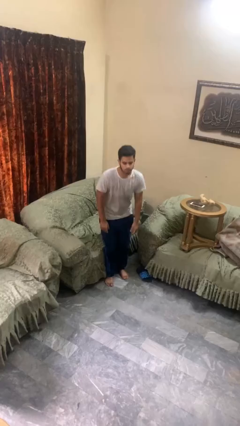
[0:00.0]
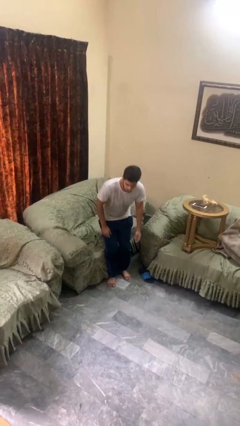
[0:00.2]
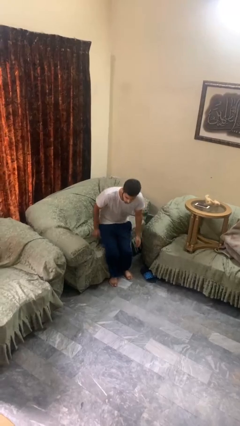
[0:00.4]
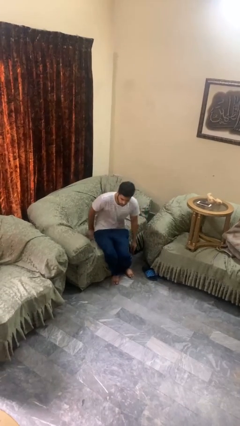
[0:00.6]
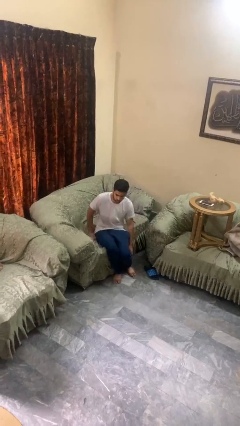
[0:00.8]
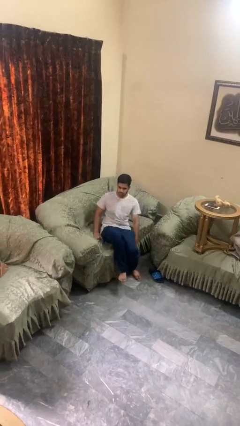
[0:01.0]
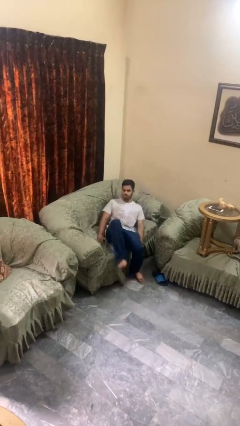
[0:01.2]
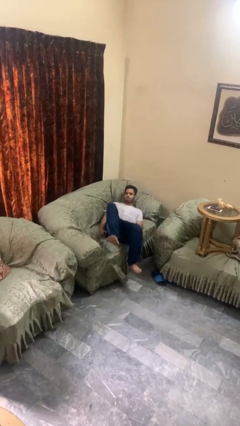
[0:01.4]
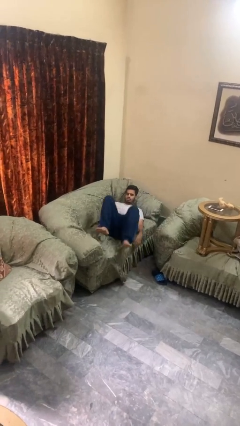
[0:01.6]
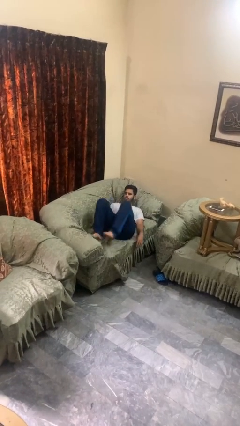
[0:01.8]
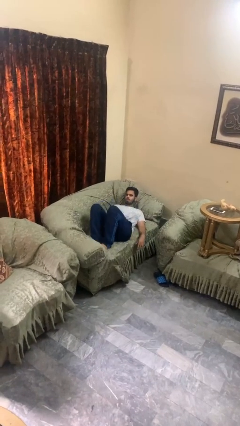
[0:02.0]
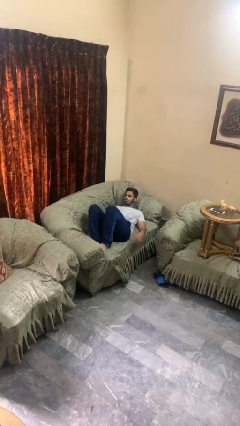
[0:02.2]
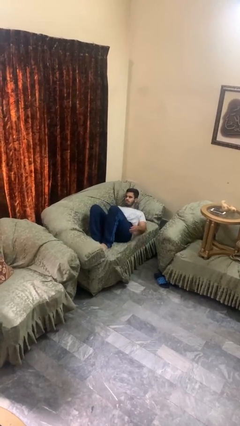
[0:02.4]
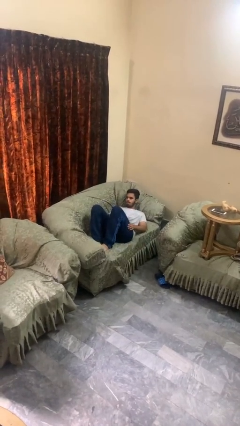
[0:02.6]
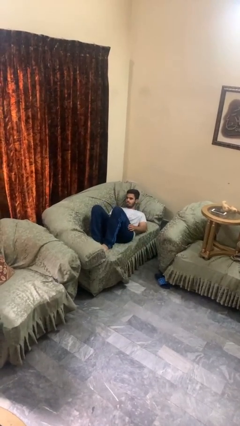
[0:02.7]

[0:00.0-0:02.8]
person lies down on couch

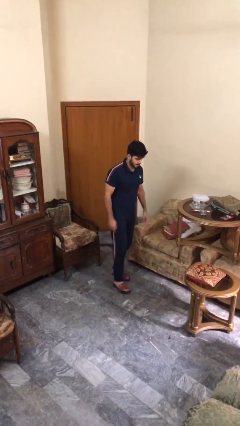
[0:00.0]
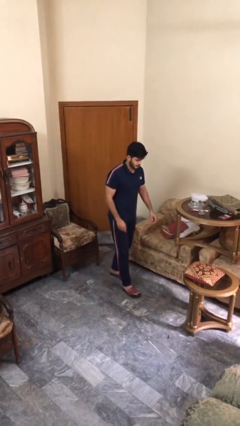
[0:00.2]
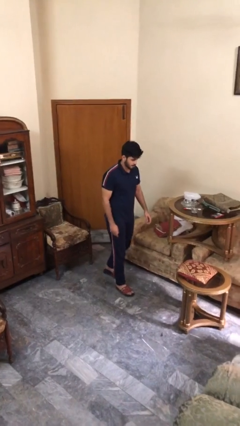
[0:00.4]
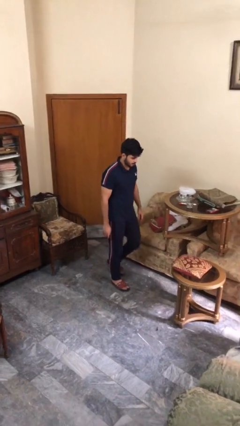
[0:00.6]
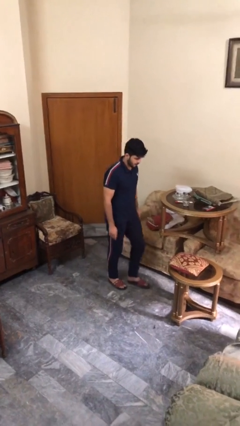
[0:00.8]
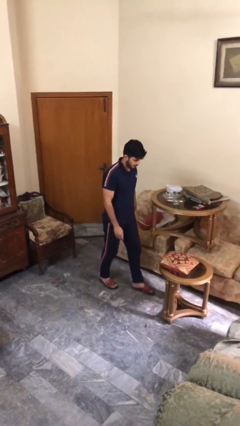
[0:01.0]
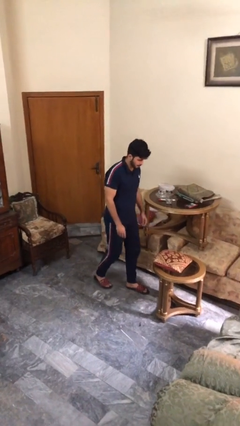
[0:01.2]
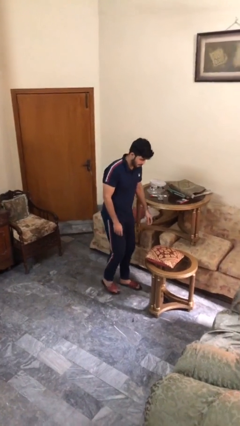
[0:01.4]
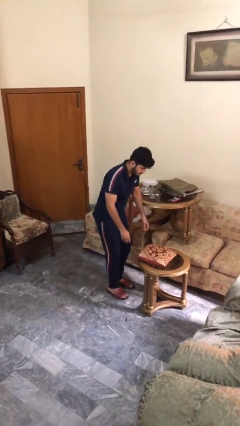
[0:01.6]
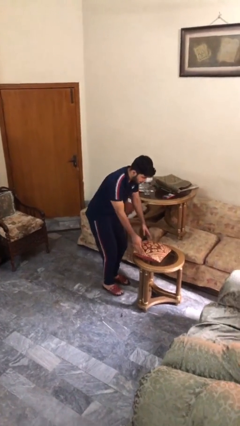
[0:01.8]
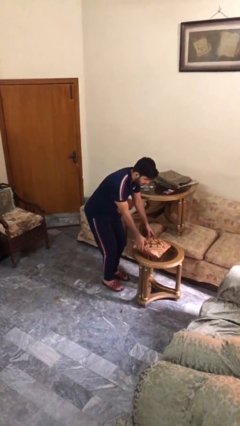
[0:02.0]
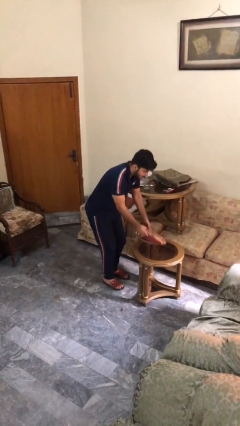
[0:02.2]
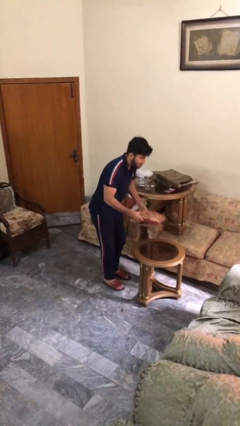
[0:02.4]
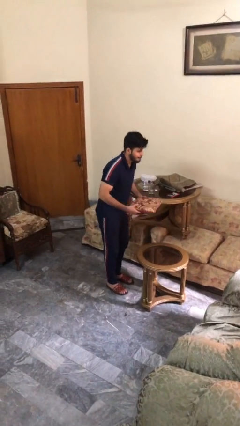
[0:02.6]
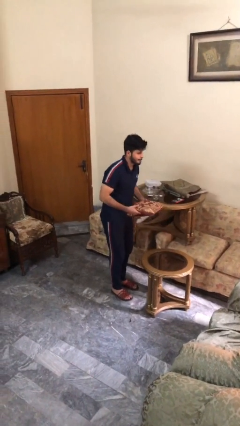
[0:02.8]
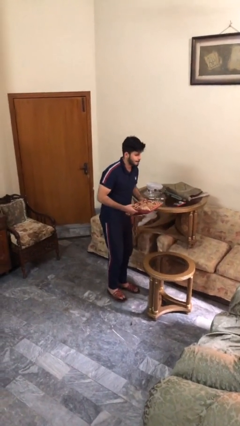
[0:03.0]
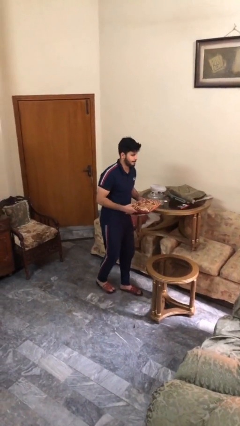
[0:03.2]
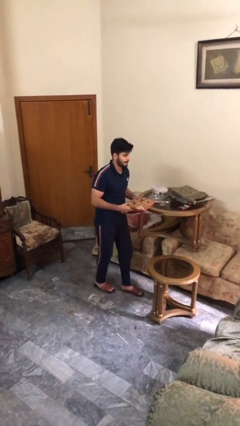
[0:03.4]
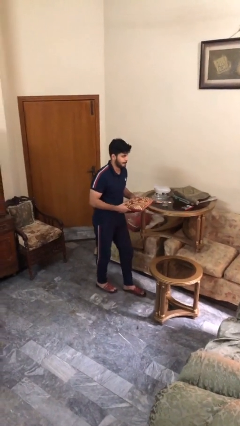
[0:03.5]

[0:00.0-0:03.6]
person picks up object from table

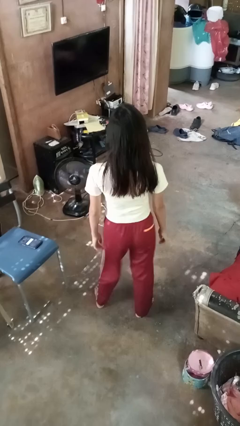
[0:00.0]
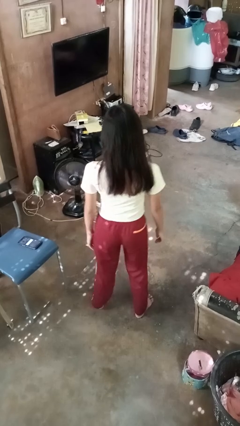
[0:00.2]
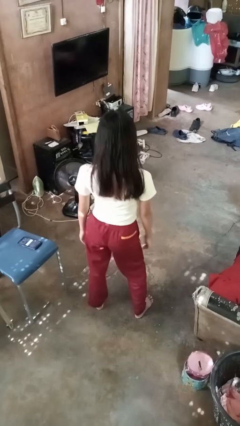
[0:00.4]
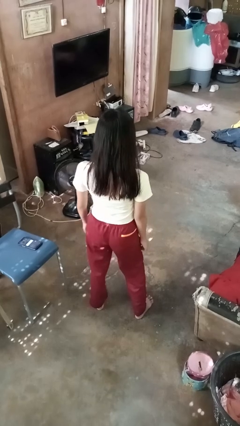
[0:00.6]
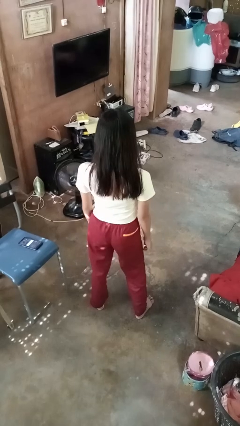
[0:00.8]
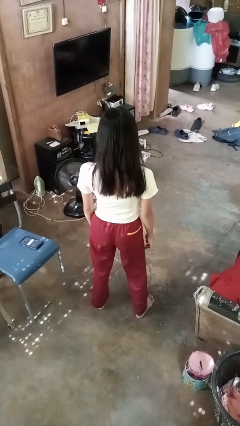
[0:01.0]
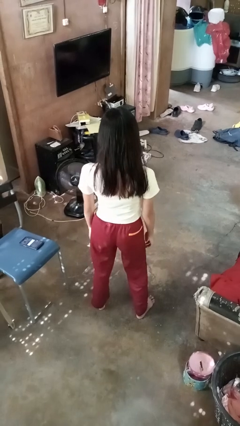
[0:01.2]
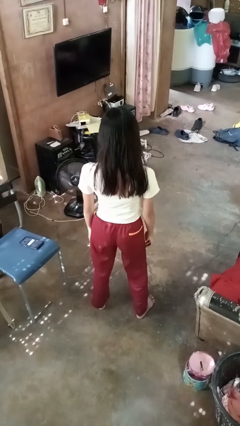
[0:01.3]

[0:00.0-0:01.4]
person wiggles hips

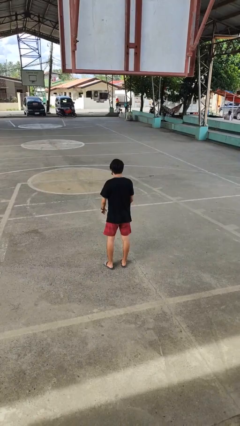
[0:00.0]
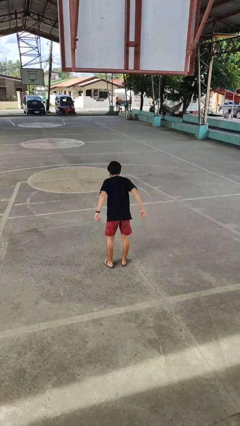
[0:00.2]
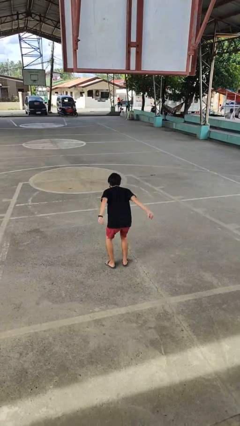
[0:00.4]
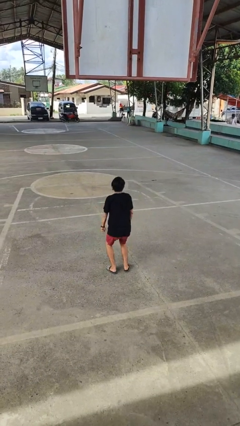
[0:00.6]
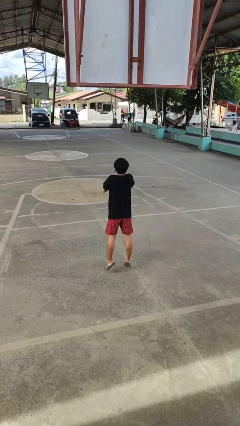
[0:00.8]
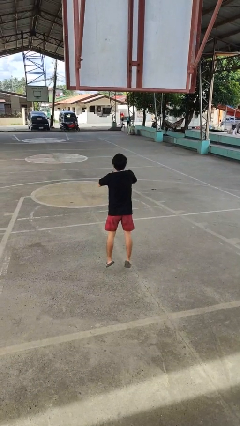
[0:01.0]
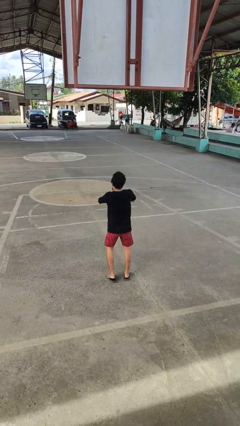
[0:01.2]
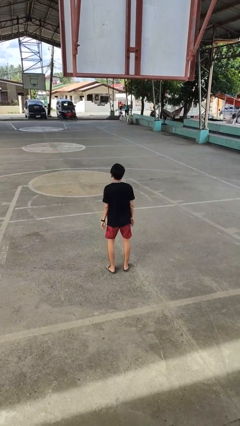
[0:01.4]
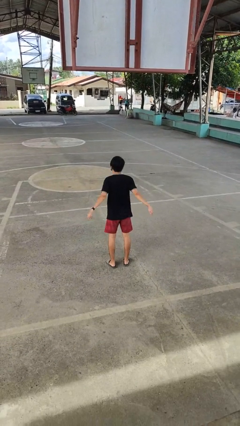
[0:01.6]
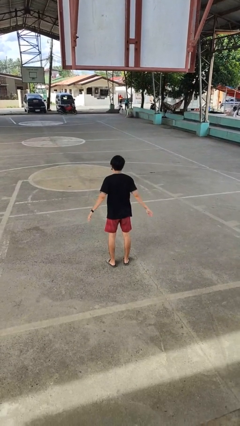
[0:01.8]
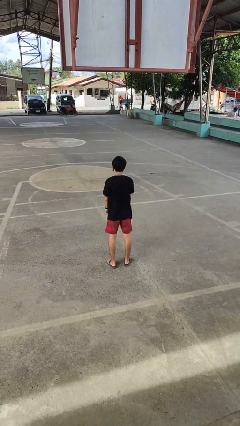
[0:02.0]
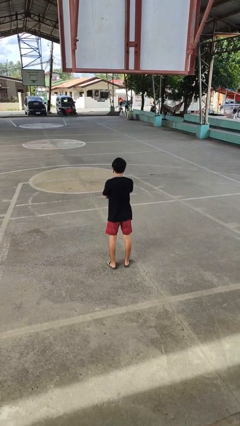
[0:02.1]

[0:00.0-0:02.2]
person jumps

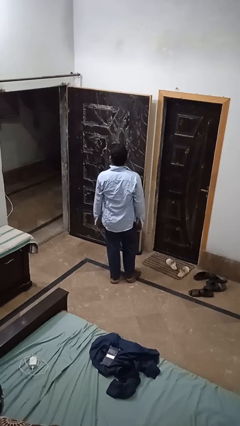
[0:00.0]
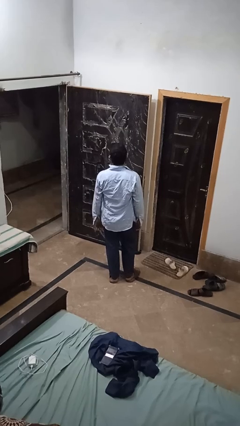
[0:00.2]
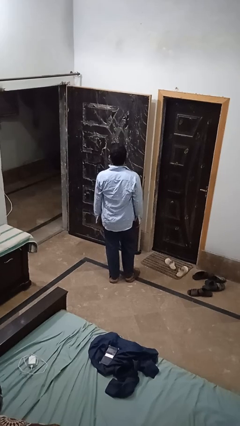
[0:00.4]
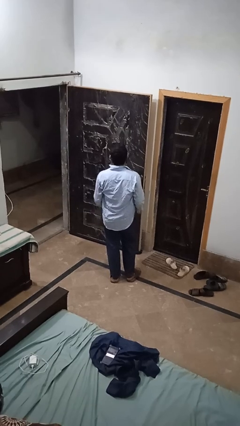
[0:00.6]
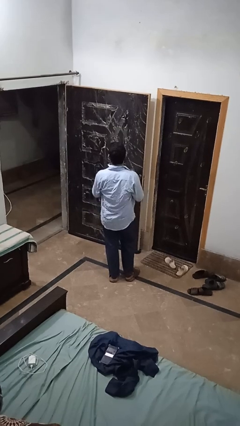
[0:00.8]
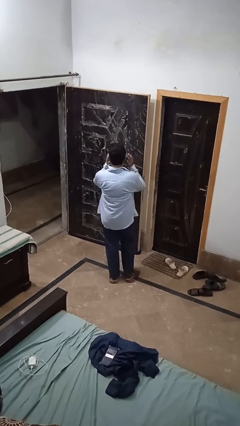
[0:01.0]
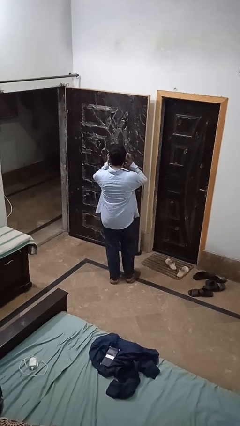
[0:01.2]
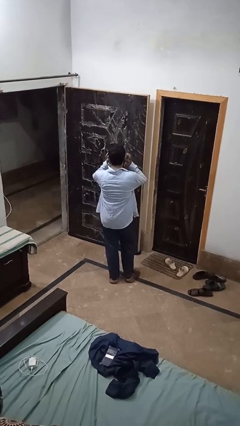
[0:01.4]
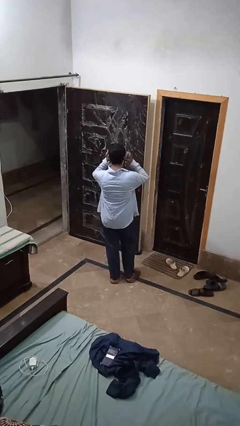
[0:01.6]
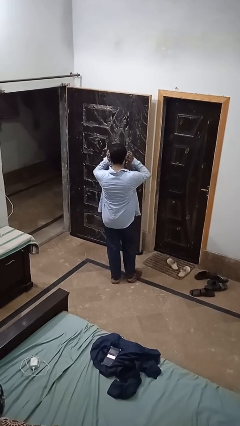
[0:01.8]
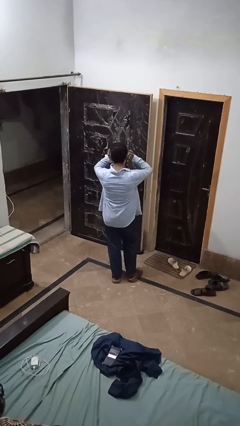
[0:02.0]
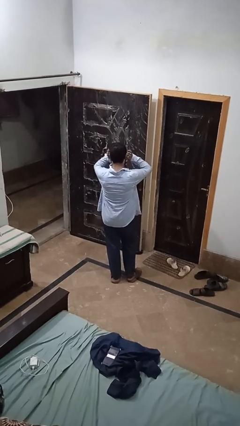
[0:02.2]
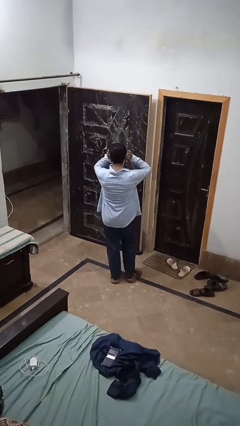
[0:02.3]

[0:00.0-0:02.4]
person puts fingers in ear

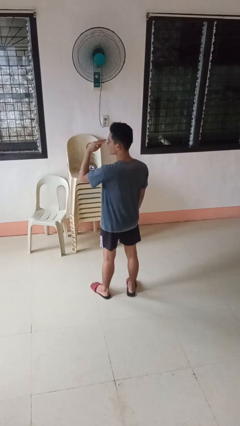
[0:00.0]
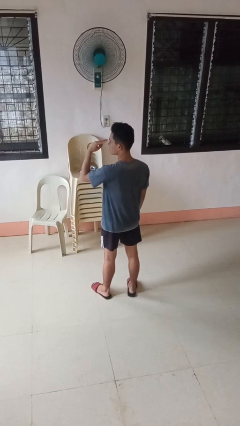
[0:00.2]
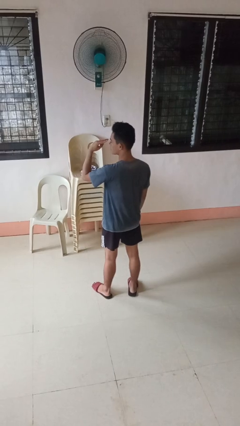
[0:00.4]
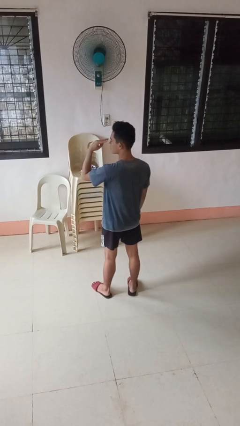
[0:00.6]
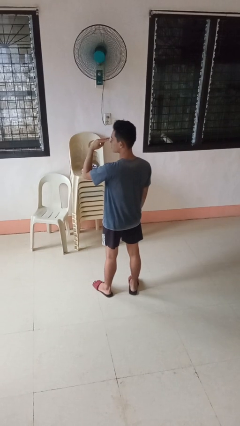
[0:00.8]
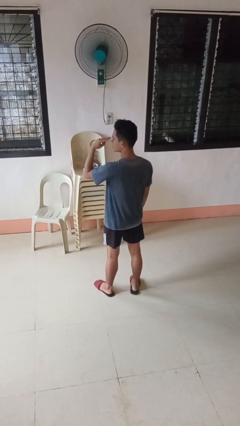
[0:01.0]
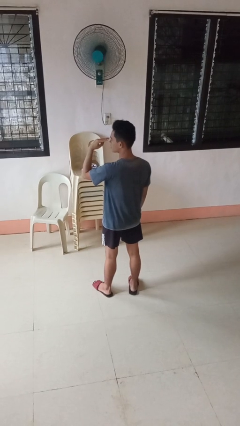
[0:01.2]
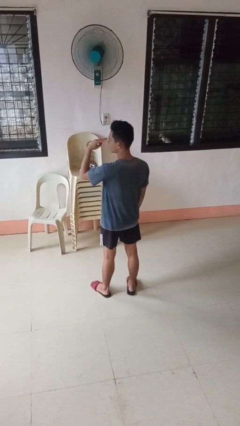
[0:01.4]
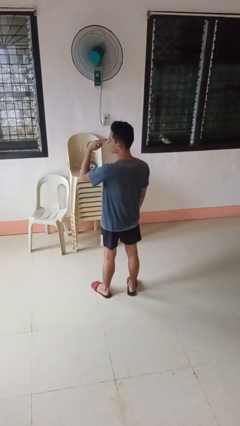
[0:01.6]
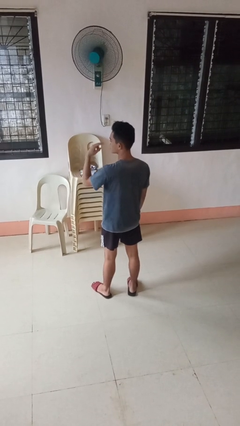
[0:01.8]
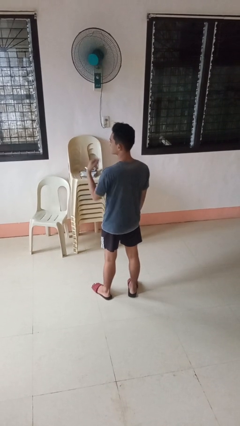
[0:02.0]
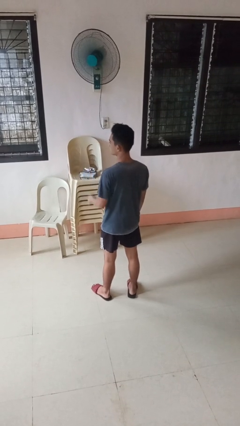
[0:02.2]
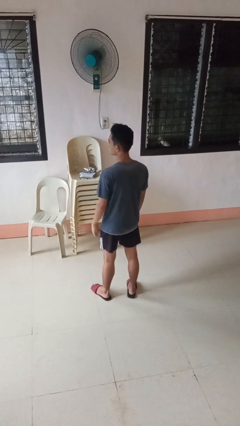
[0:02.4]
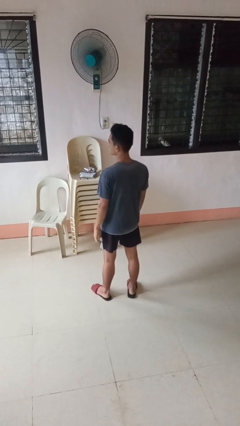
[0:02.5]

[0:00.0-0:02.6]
person gestures watch closely

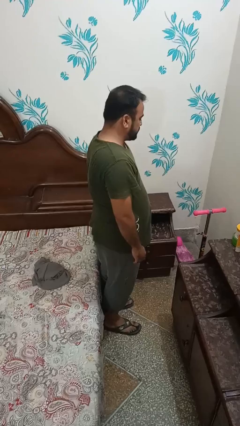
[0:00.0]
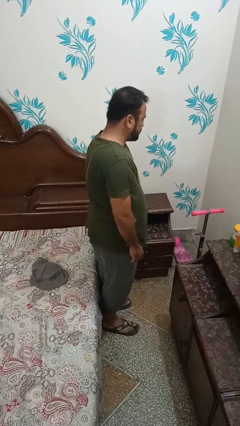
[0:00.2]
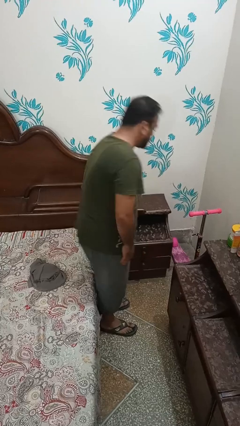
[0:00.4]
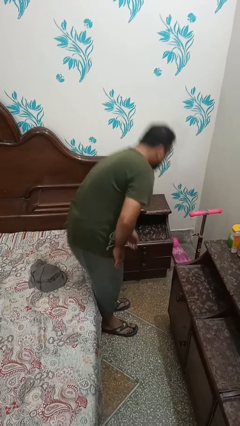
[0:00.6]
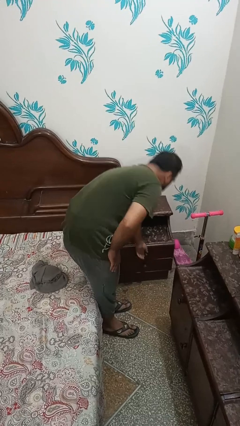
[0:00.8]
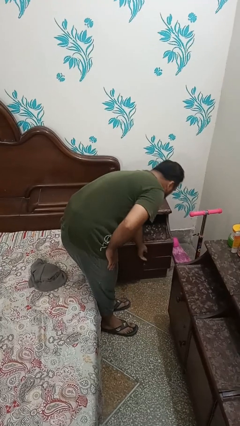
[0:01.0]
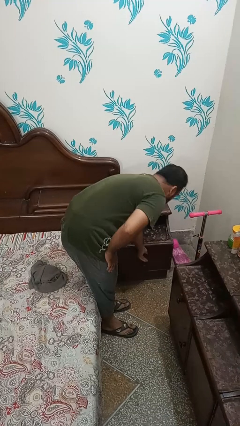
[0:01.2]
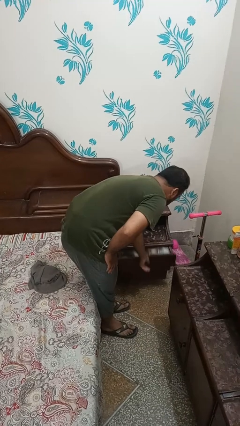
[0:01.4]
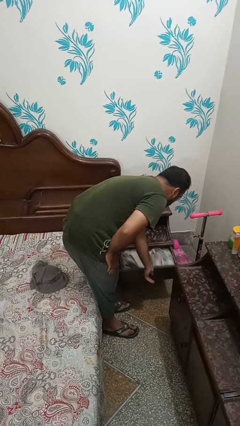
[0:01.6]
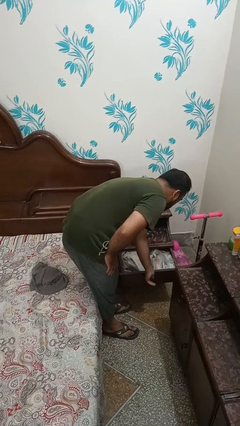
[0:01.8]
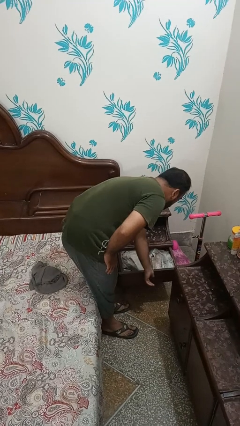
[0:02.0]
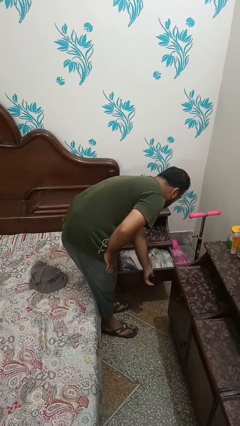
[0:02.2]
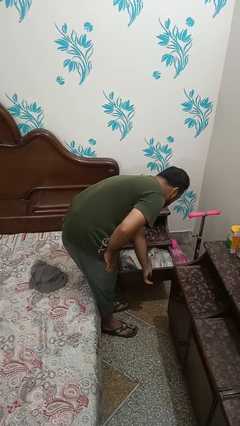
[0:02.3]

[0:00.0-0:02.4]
person opens dresser drawer
